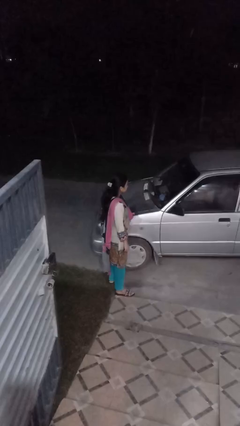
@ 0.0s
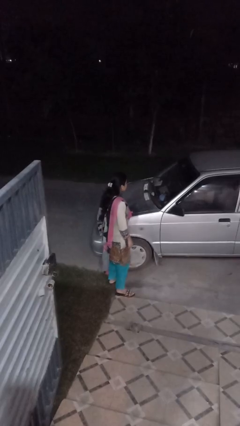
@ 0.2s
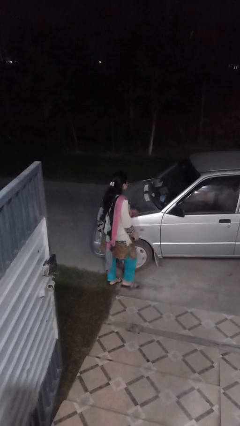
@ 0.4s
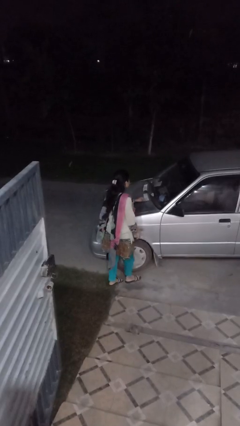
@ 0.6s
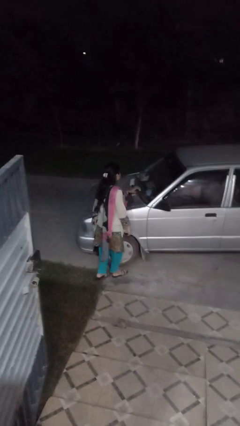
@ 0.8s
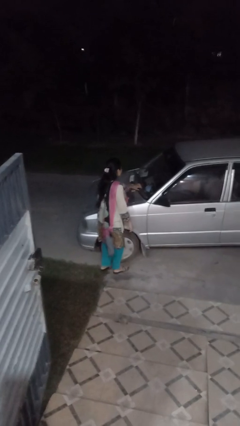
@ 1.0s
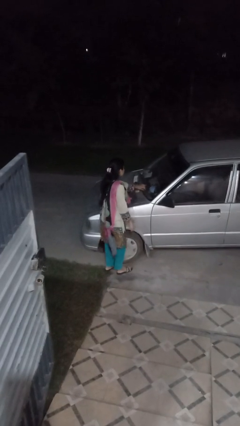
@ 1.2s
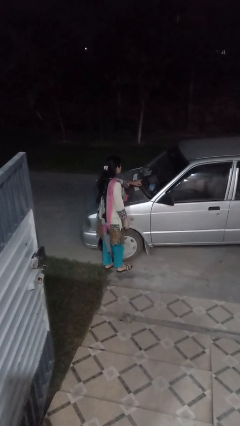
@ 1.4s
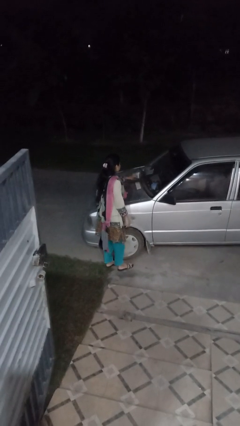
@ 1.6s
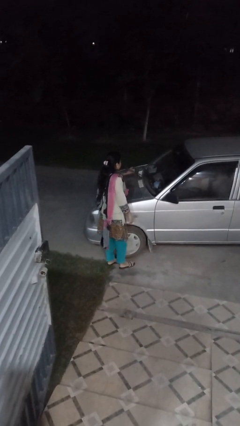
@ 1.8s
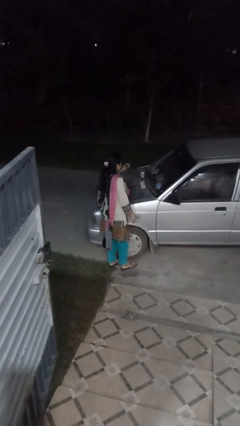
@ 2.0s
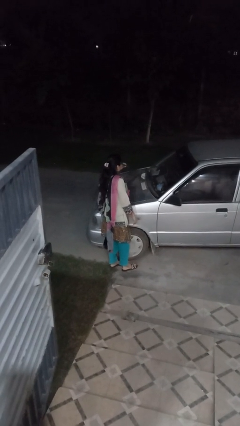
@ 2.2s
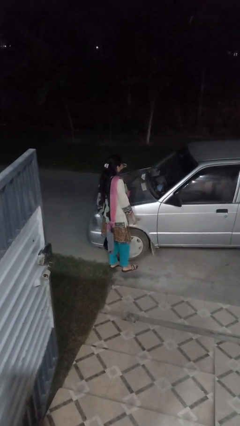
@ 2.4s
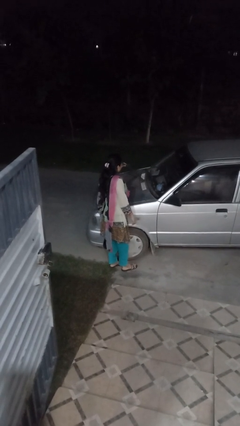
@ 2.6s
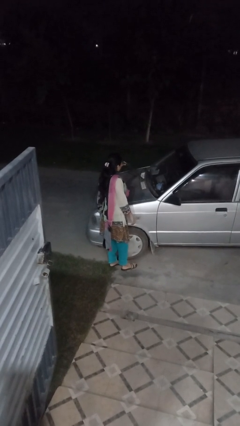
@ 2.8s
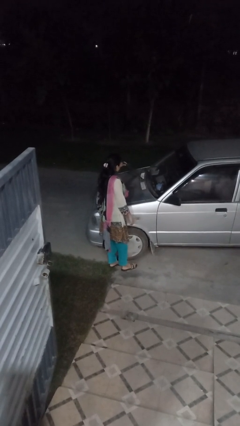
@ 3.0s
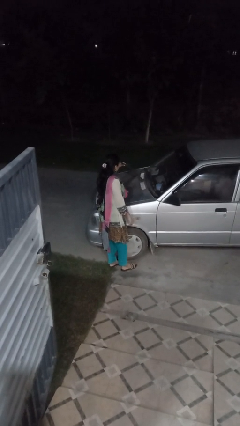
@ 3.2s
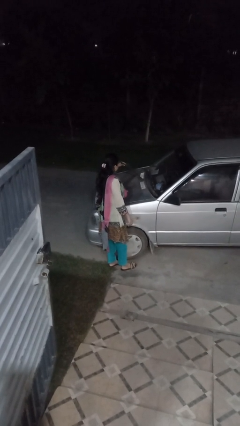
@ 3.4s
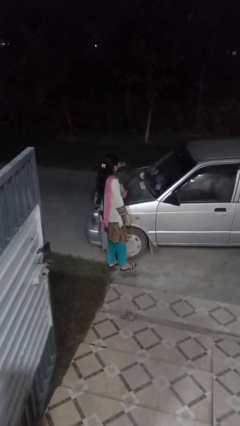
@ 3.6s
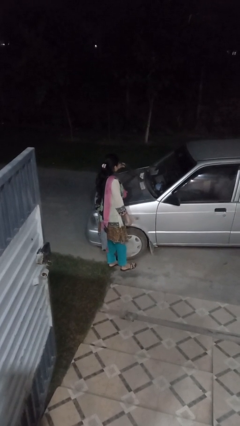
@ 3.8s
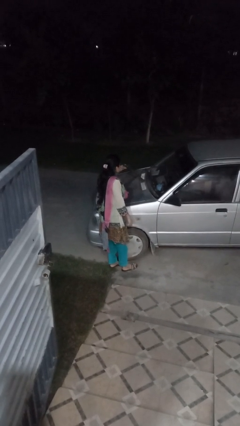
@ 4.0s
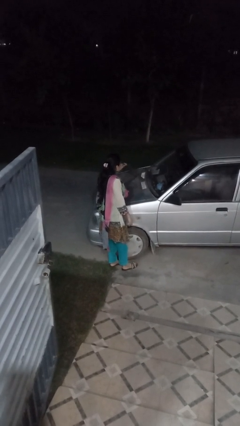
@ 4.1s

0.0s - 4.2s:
person flips up car wipers

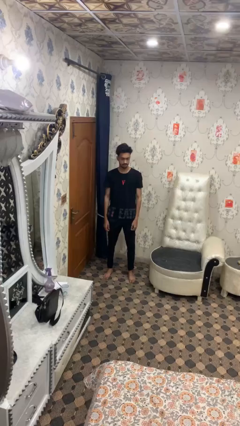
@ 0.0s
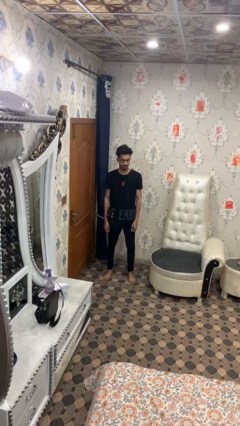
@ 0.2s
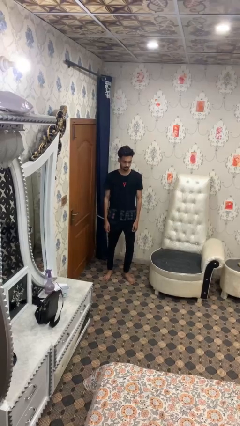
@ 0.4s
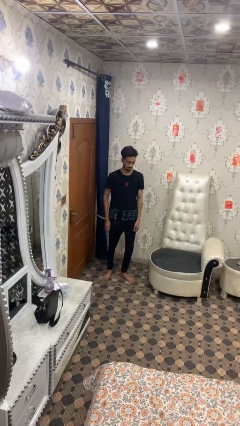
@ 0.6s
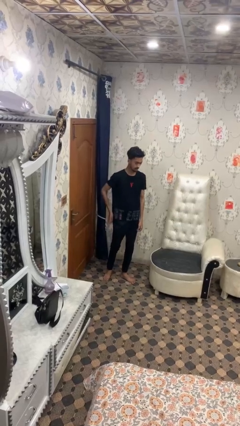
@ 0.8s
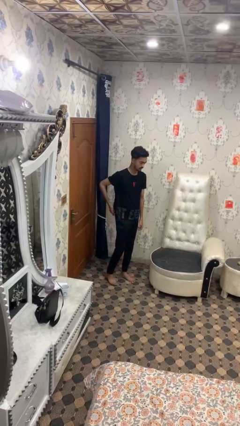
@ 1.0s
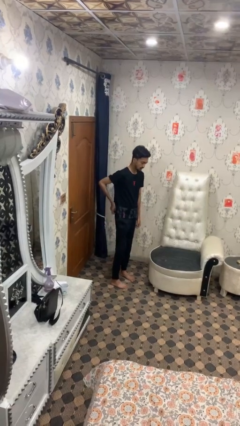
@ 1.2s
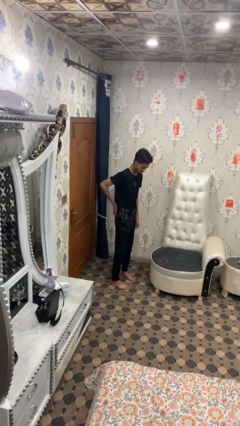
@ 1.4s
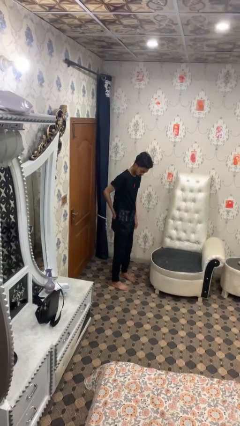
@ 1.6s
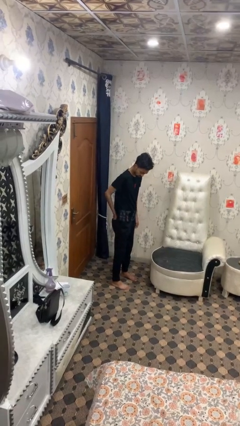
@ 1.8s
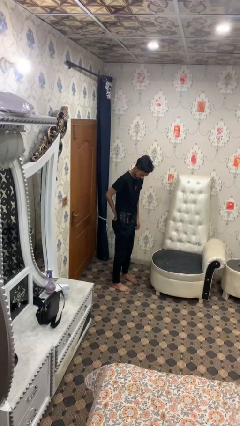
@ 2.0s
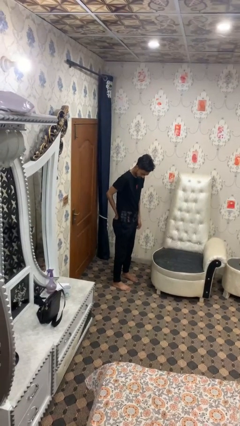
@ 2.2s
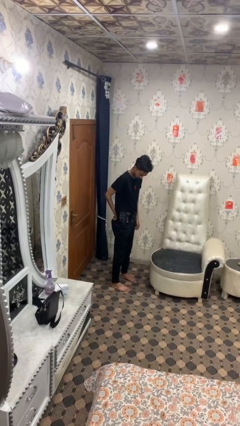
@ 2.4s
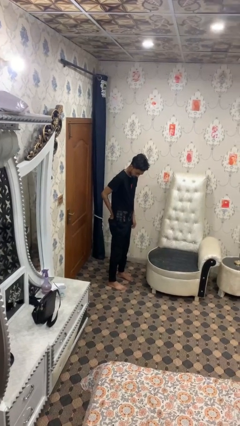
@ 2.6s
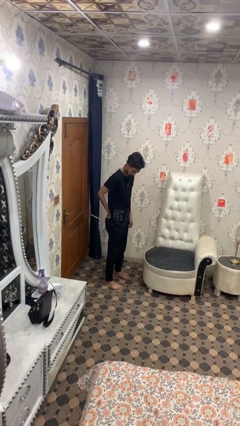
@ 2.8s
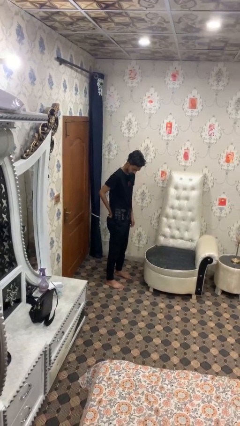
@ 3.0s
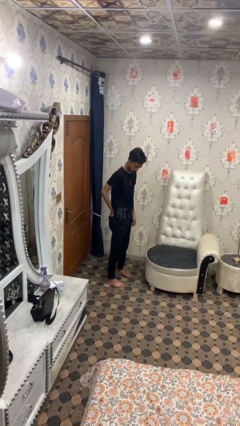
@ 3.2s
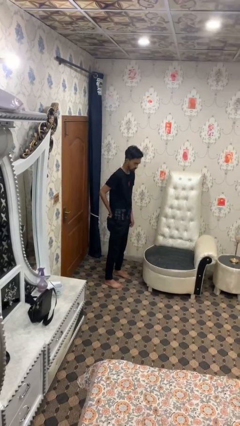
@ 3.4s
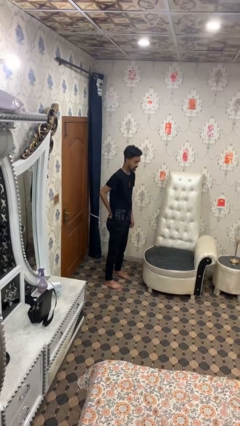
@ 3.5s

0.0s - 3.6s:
person puts hands in back pockets

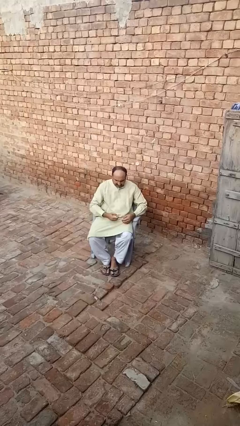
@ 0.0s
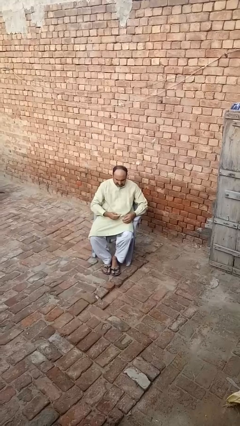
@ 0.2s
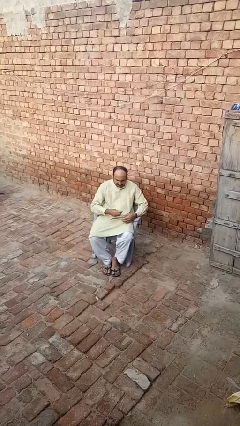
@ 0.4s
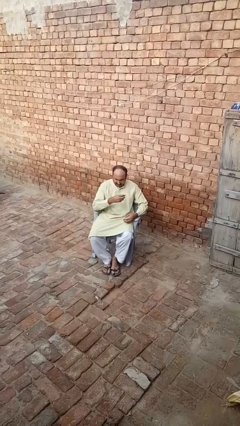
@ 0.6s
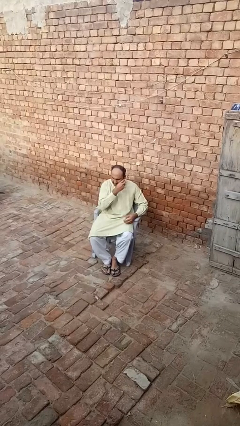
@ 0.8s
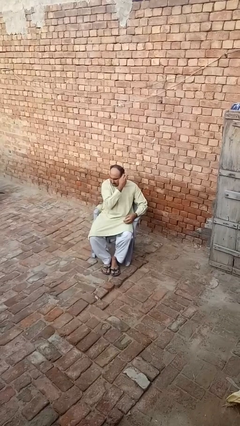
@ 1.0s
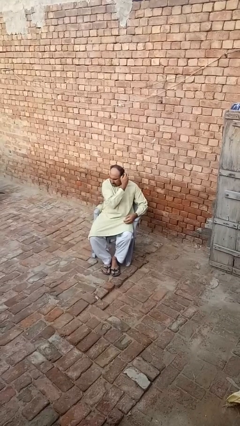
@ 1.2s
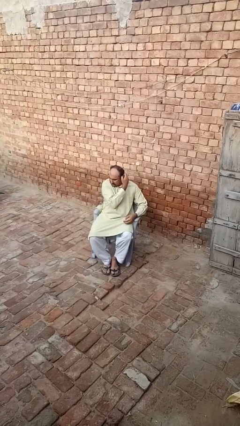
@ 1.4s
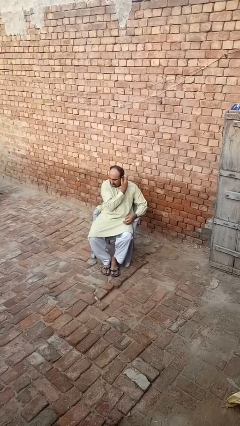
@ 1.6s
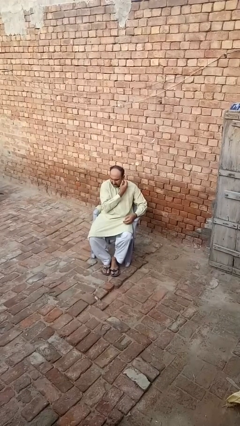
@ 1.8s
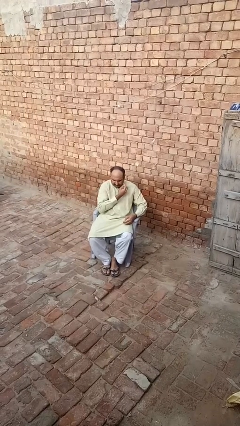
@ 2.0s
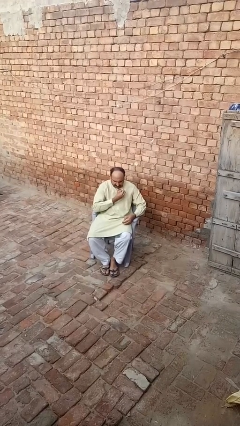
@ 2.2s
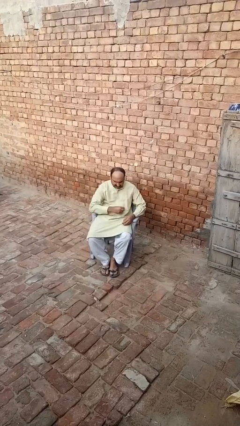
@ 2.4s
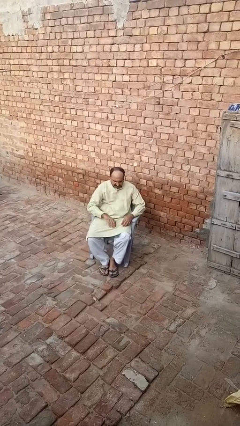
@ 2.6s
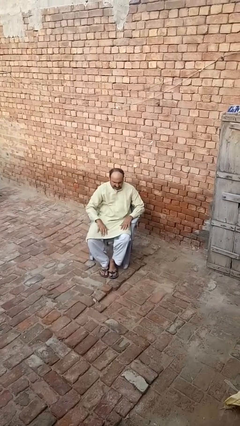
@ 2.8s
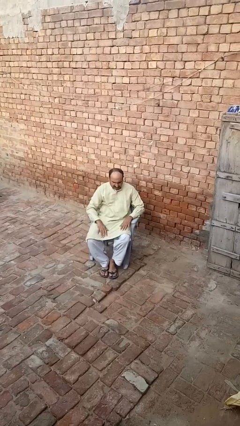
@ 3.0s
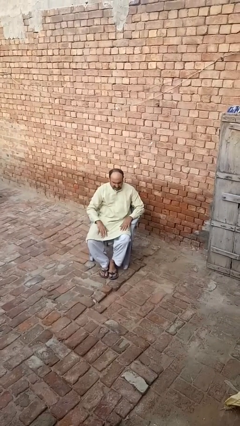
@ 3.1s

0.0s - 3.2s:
person puts on earrings

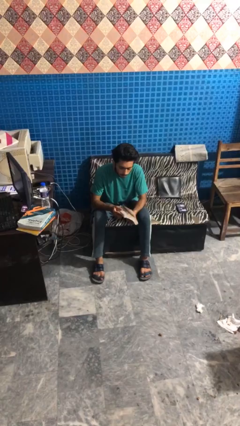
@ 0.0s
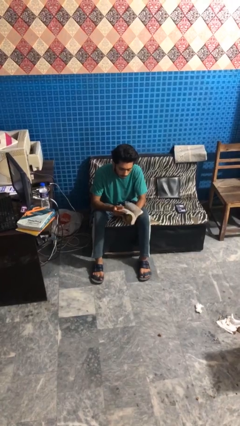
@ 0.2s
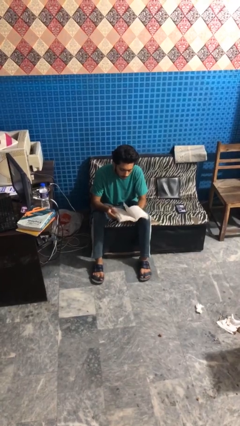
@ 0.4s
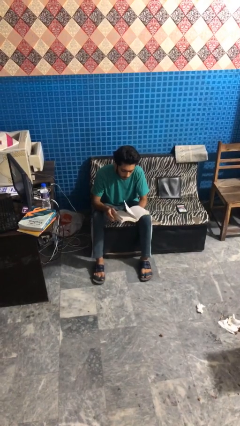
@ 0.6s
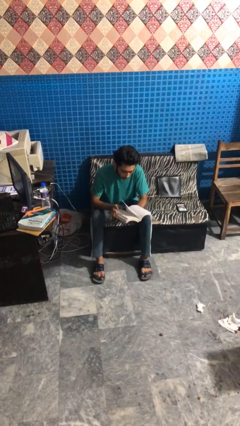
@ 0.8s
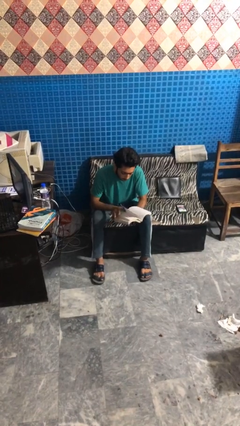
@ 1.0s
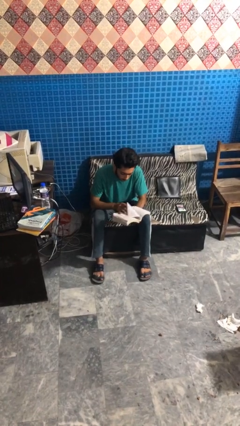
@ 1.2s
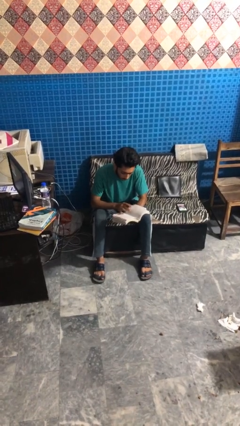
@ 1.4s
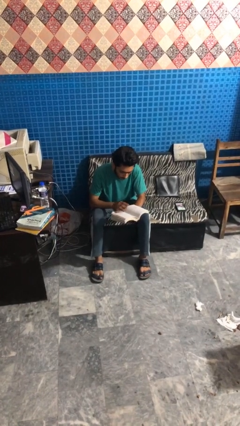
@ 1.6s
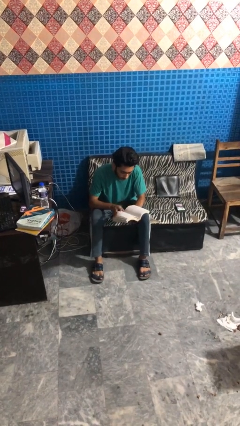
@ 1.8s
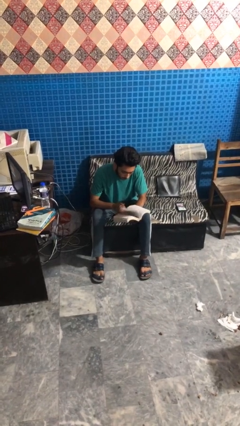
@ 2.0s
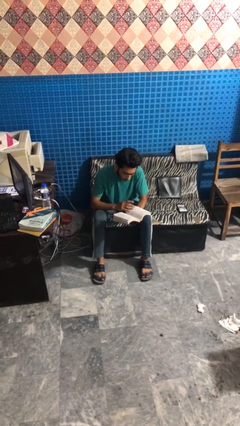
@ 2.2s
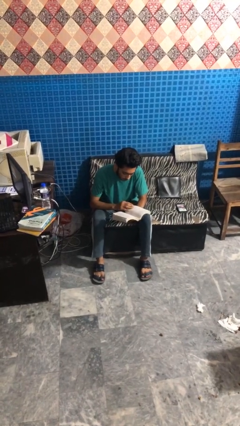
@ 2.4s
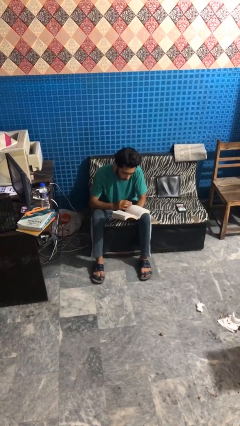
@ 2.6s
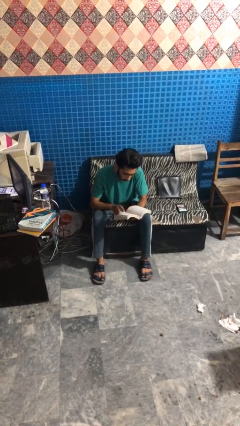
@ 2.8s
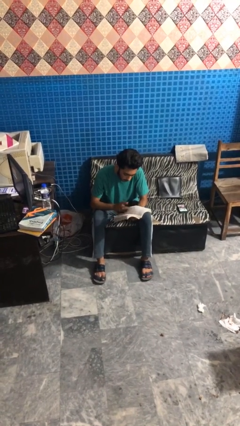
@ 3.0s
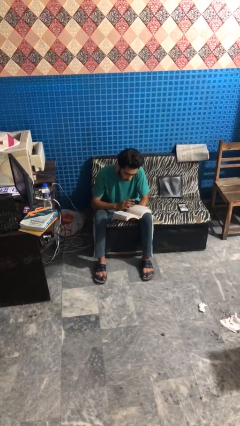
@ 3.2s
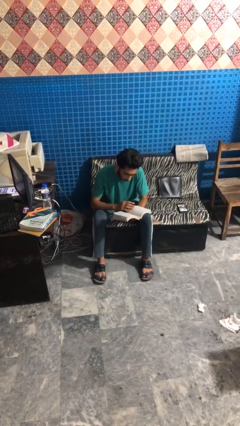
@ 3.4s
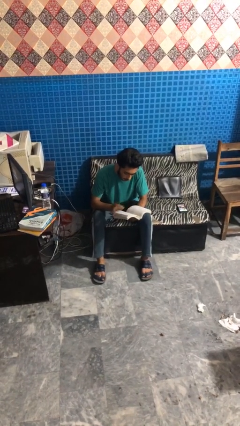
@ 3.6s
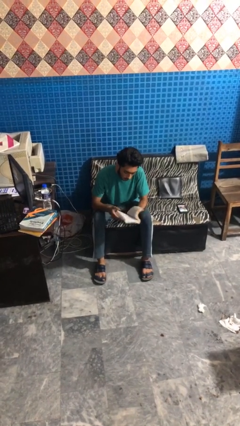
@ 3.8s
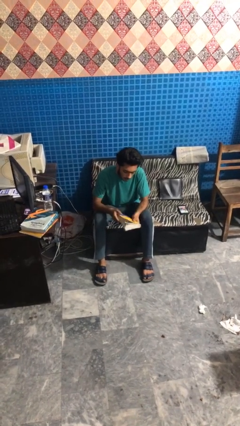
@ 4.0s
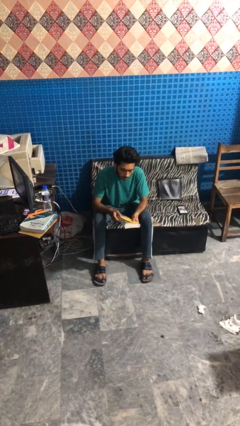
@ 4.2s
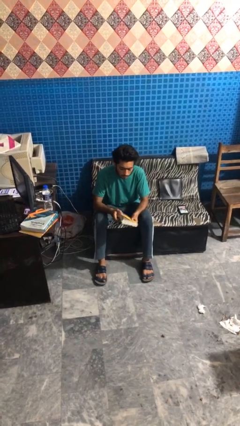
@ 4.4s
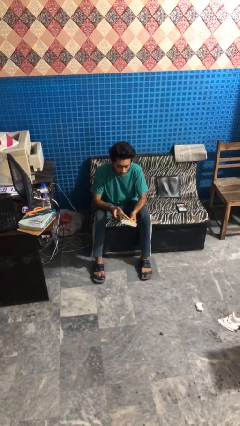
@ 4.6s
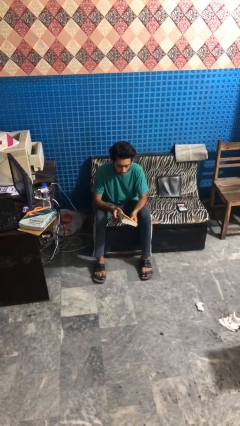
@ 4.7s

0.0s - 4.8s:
person reads magazine

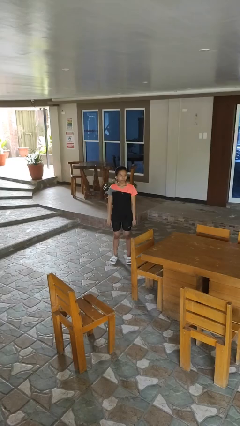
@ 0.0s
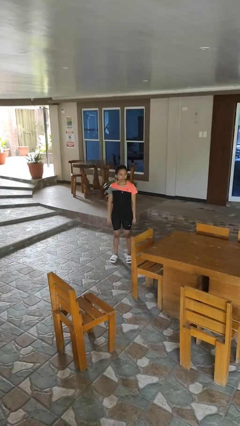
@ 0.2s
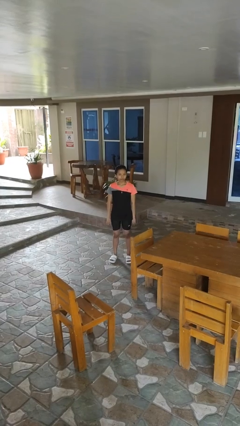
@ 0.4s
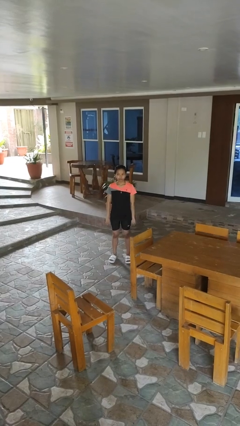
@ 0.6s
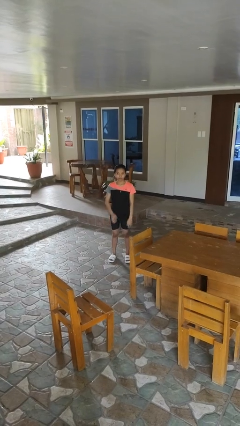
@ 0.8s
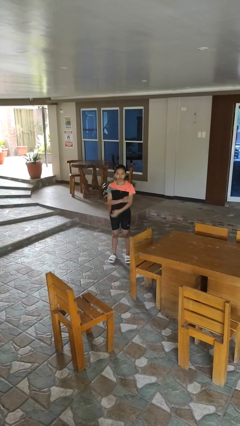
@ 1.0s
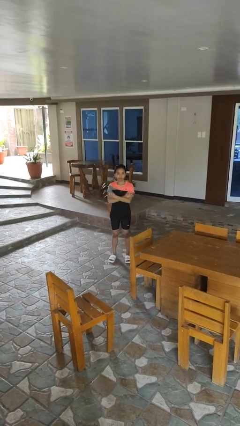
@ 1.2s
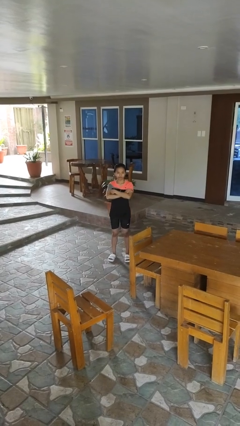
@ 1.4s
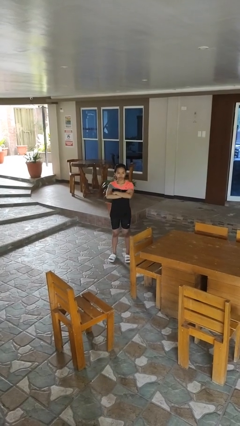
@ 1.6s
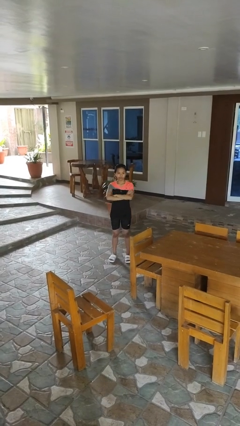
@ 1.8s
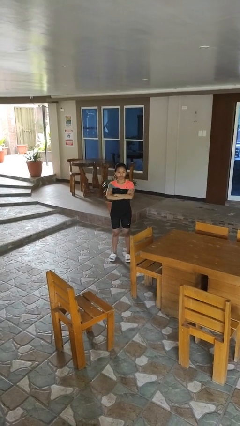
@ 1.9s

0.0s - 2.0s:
person crosses arms
